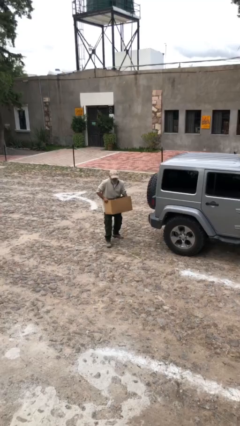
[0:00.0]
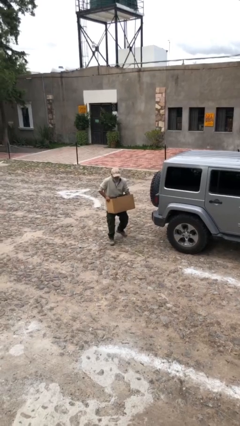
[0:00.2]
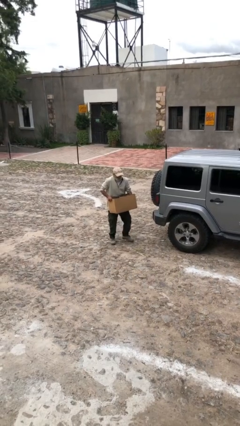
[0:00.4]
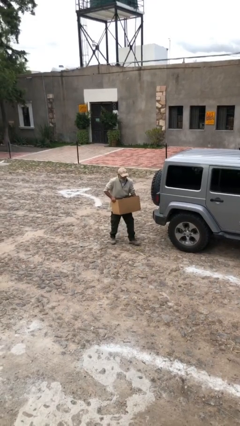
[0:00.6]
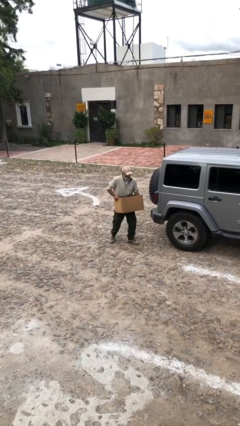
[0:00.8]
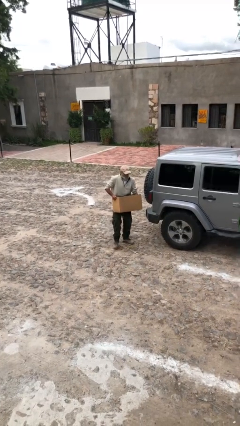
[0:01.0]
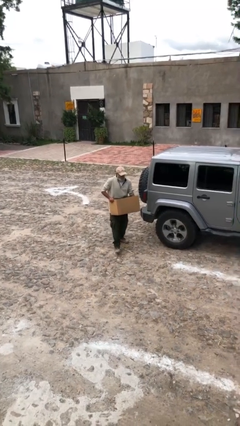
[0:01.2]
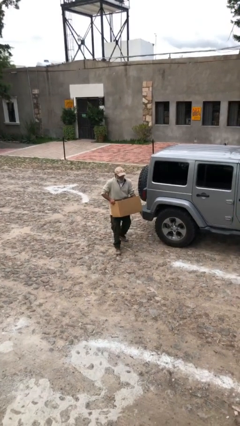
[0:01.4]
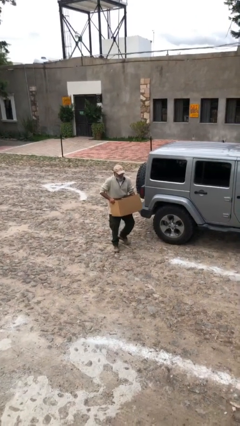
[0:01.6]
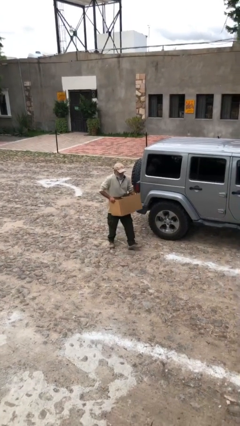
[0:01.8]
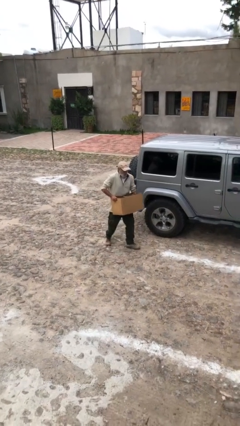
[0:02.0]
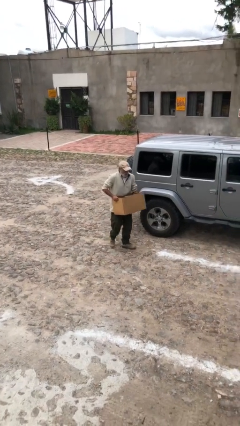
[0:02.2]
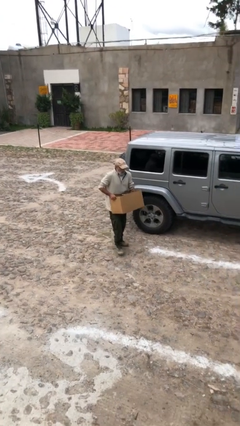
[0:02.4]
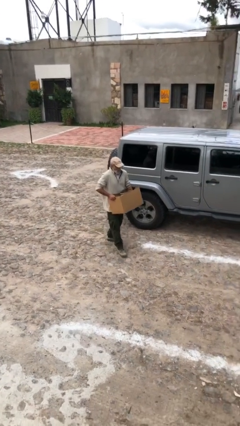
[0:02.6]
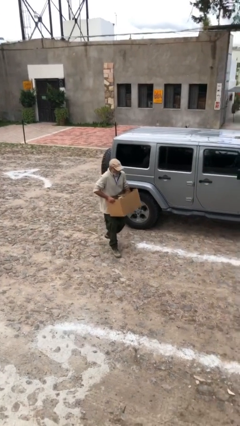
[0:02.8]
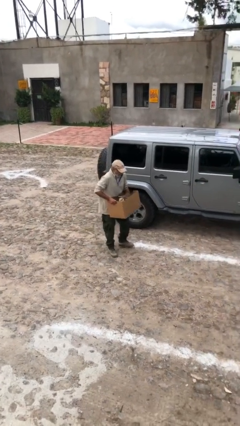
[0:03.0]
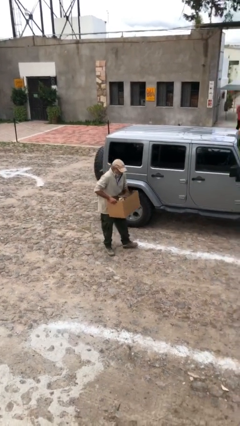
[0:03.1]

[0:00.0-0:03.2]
person carries heavy object

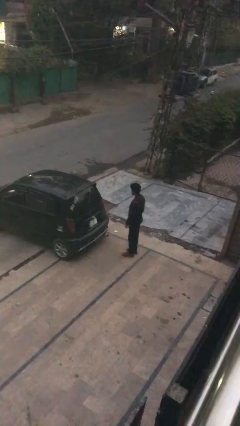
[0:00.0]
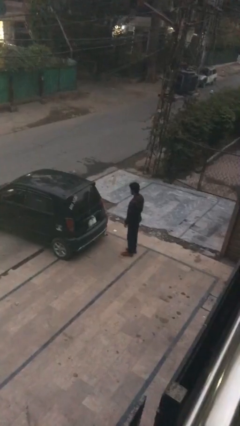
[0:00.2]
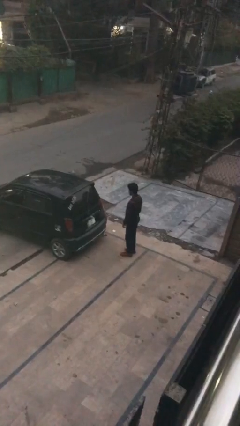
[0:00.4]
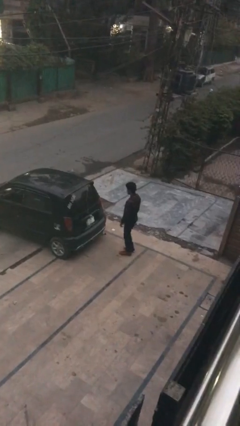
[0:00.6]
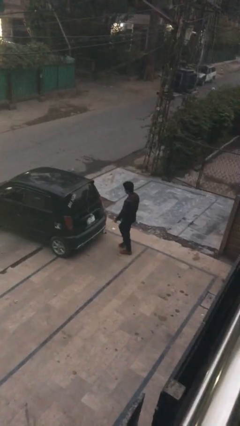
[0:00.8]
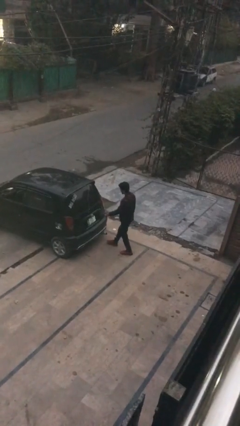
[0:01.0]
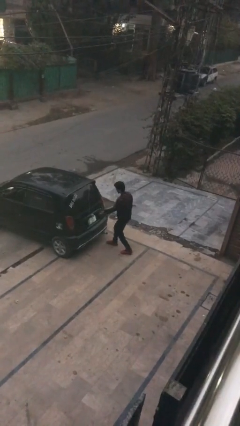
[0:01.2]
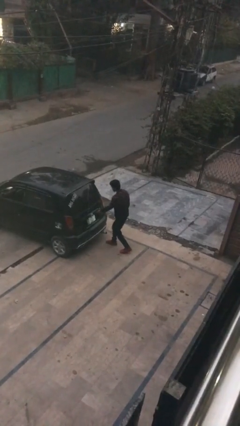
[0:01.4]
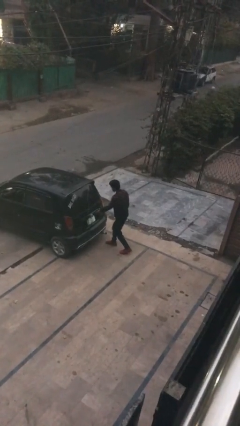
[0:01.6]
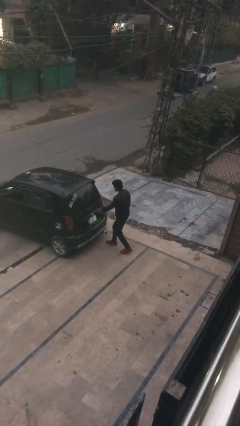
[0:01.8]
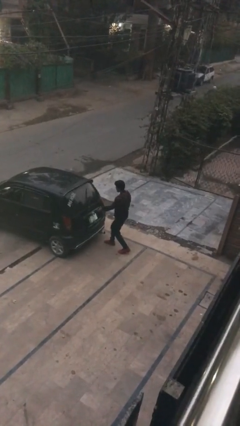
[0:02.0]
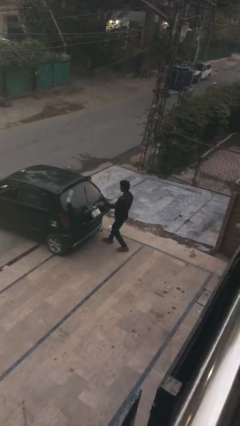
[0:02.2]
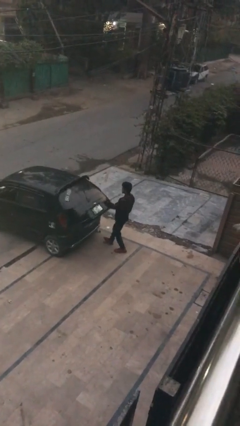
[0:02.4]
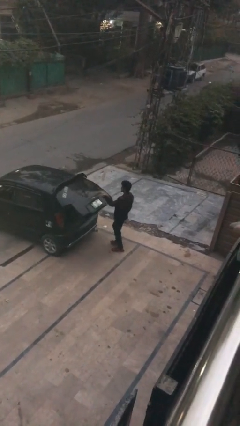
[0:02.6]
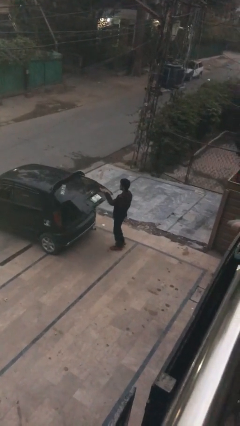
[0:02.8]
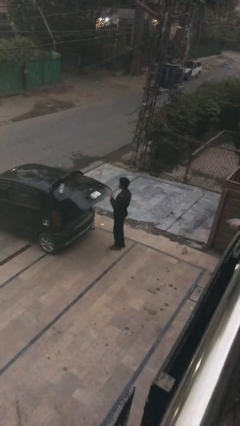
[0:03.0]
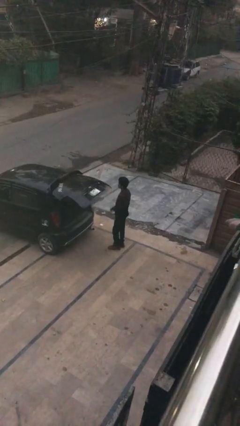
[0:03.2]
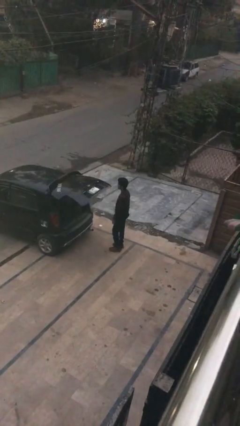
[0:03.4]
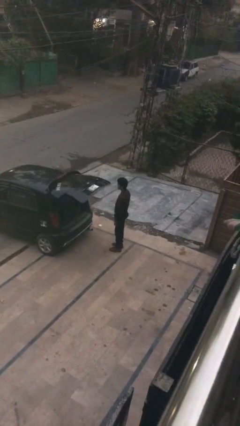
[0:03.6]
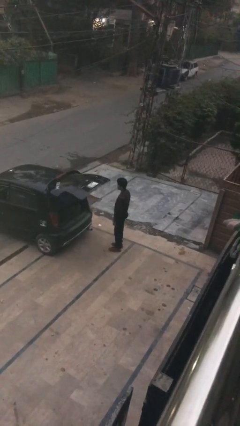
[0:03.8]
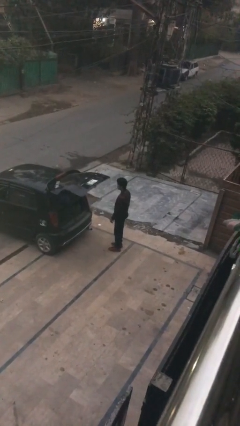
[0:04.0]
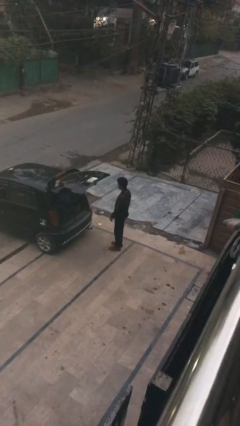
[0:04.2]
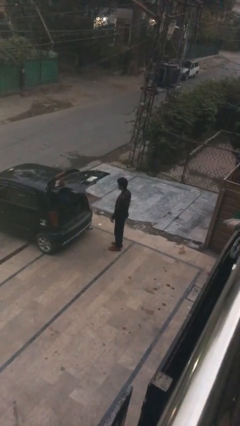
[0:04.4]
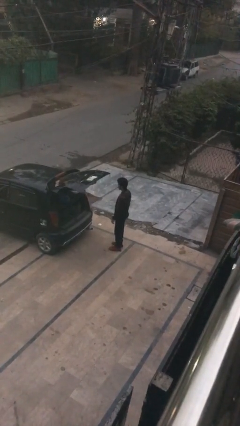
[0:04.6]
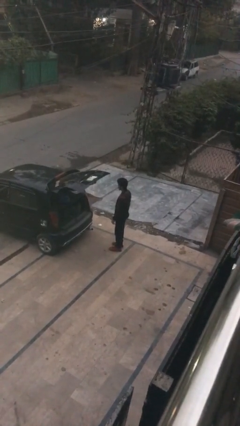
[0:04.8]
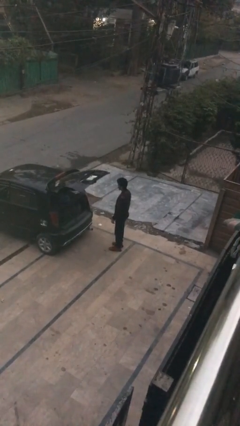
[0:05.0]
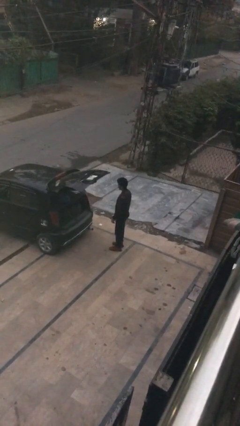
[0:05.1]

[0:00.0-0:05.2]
person opens car trunk

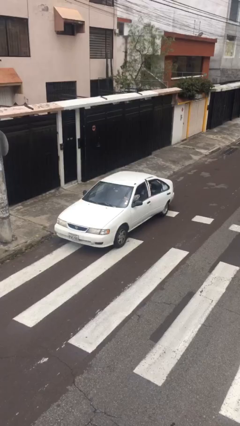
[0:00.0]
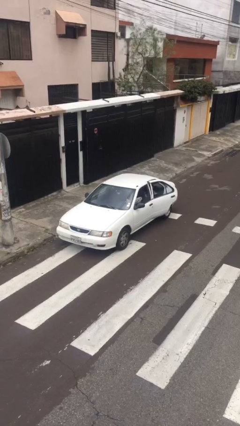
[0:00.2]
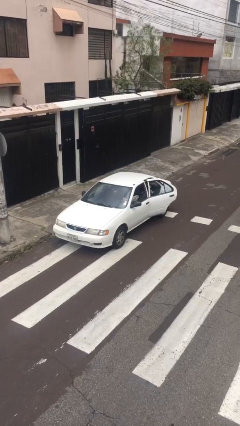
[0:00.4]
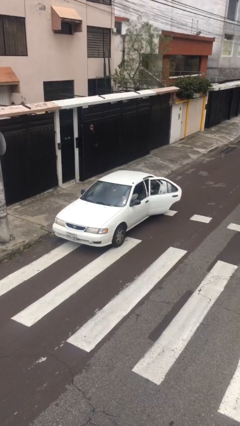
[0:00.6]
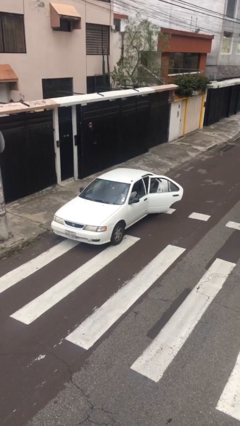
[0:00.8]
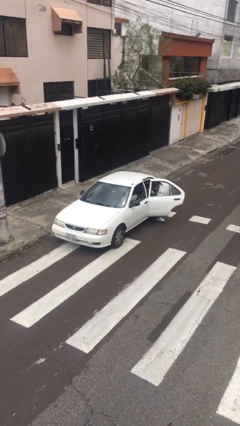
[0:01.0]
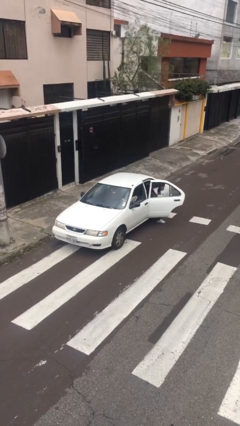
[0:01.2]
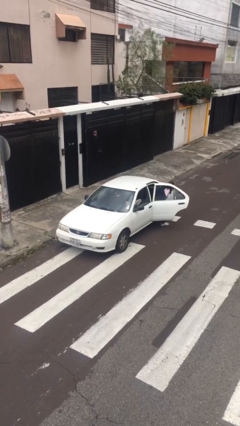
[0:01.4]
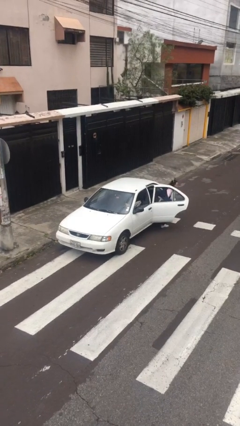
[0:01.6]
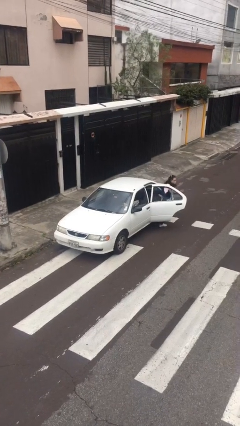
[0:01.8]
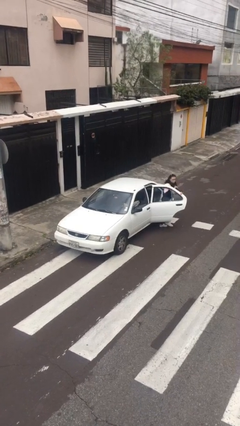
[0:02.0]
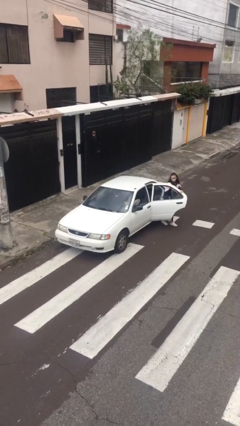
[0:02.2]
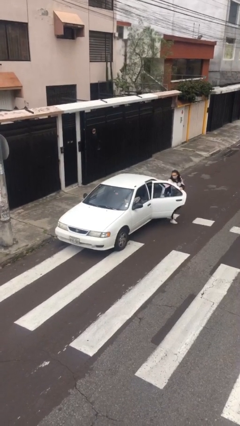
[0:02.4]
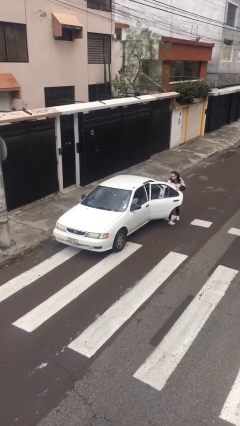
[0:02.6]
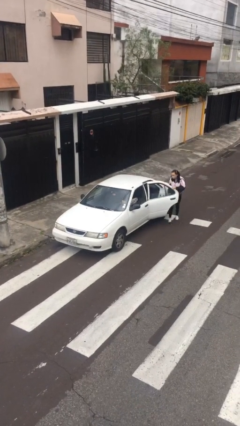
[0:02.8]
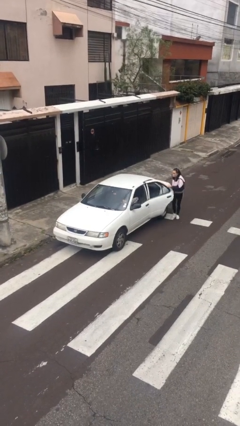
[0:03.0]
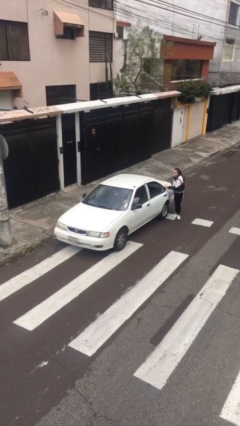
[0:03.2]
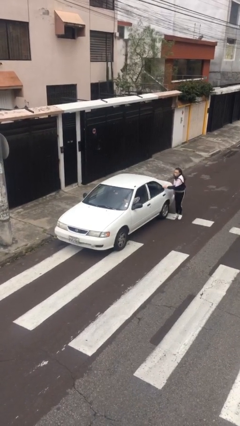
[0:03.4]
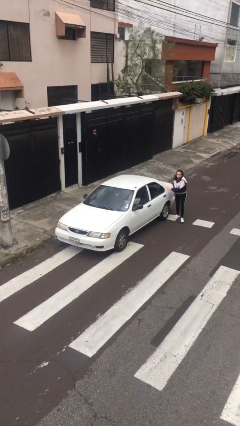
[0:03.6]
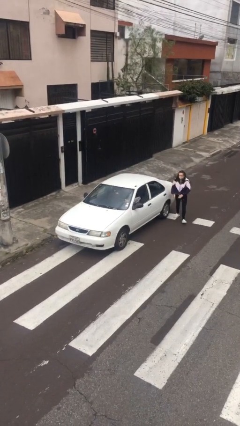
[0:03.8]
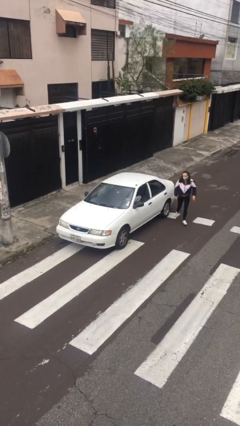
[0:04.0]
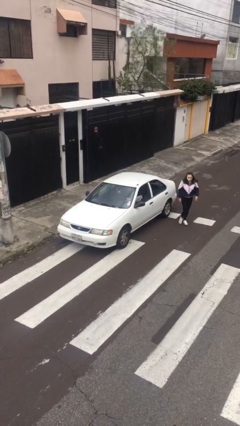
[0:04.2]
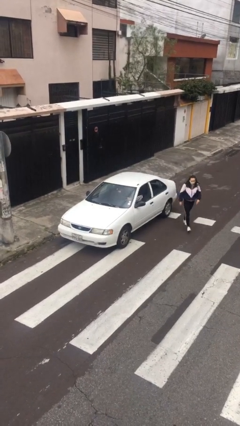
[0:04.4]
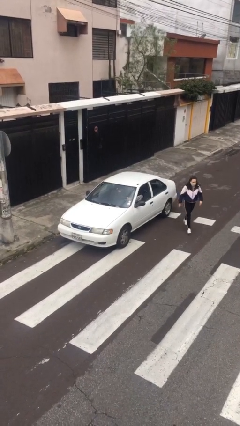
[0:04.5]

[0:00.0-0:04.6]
car drops off person

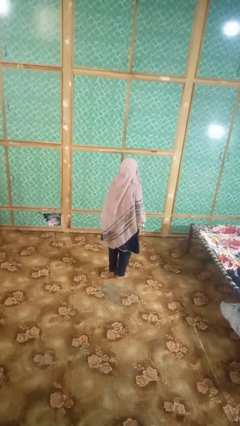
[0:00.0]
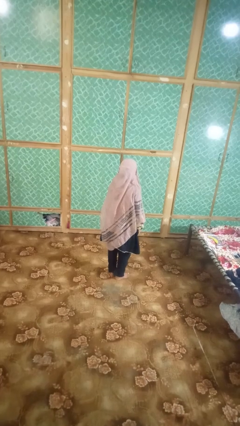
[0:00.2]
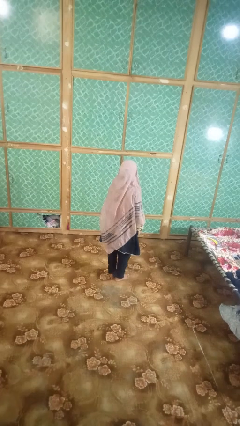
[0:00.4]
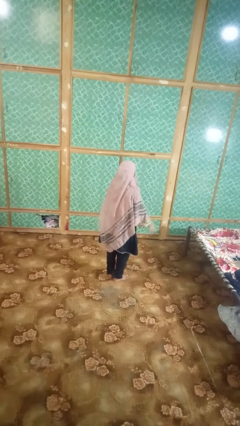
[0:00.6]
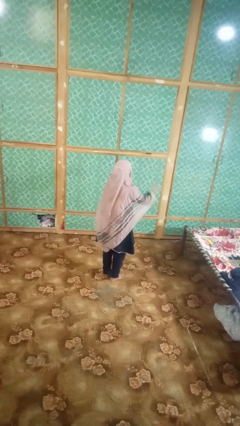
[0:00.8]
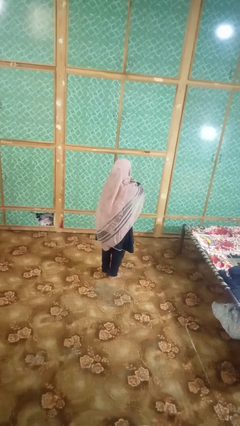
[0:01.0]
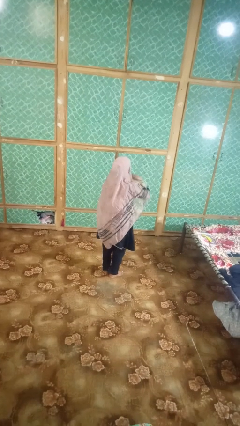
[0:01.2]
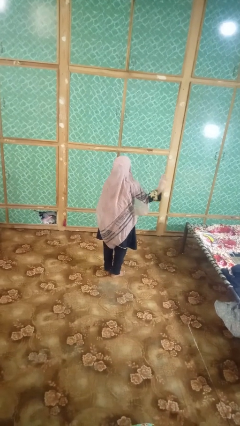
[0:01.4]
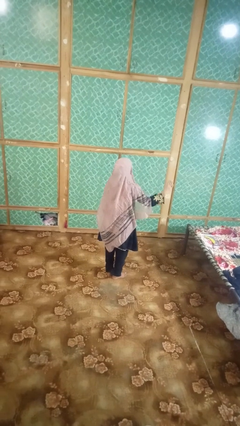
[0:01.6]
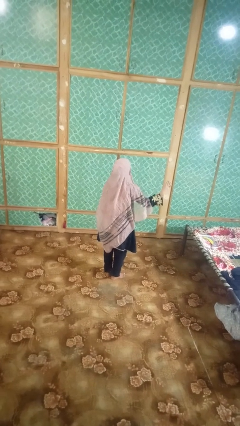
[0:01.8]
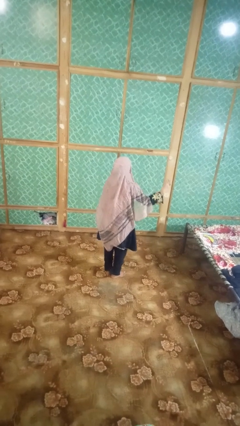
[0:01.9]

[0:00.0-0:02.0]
person gestures cut

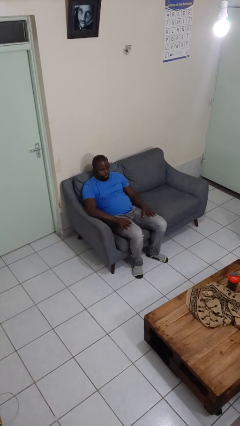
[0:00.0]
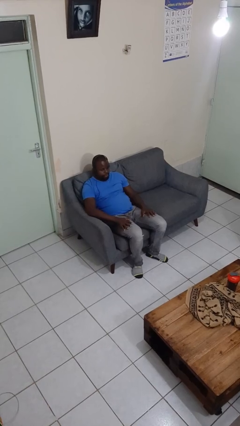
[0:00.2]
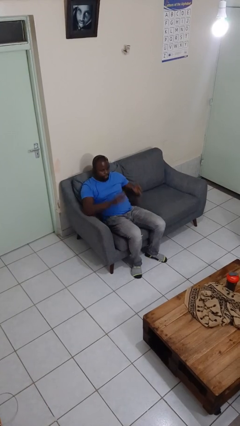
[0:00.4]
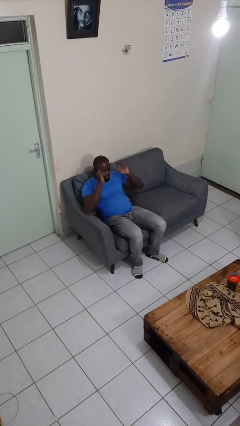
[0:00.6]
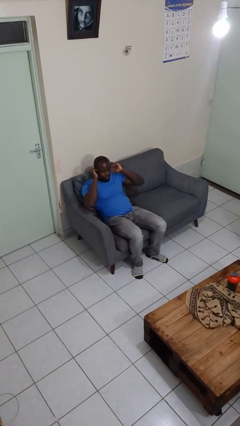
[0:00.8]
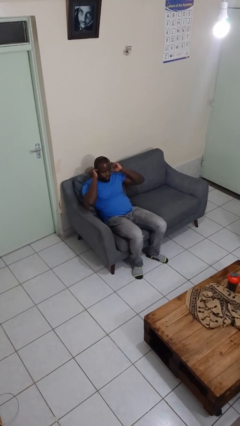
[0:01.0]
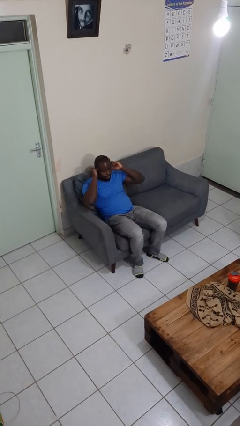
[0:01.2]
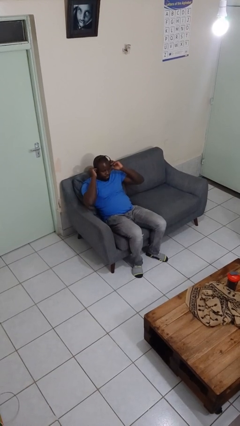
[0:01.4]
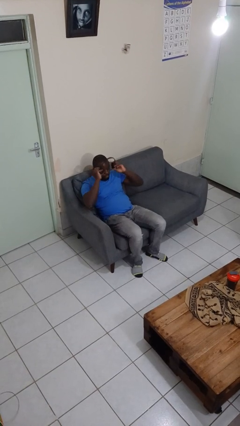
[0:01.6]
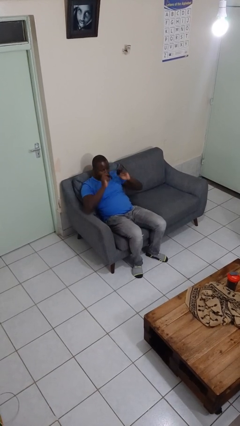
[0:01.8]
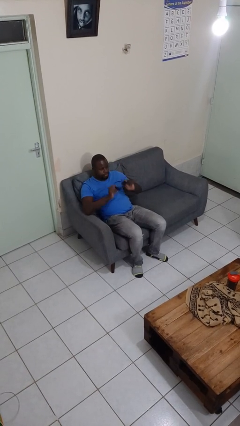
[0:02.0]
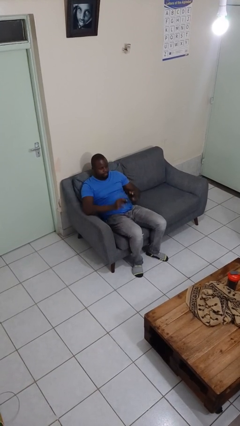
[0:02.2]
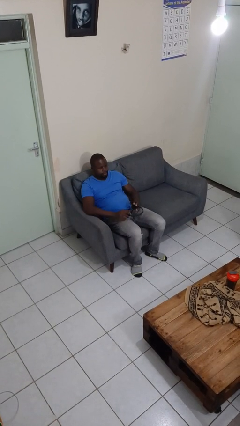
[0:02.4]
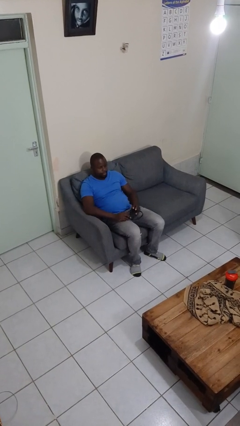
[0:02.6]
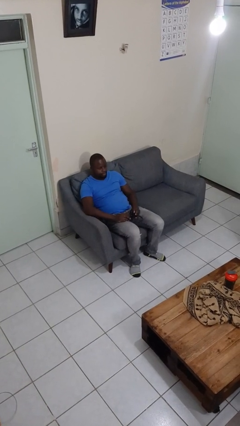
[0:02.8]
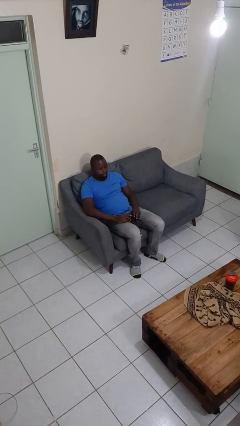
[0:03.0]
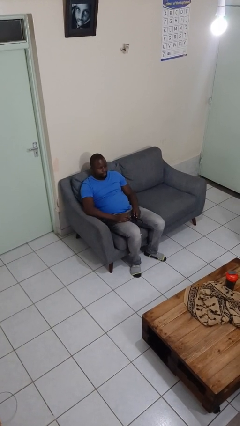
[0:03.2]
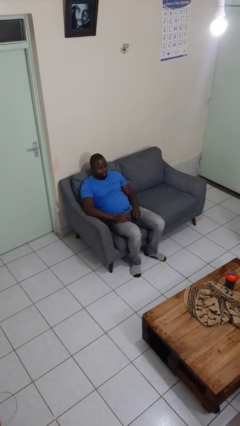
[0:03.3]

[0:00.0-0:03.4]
person takes off headphones
